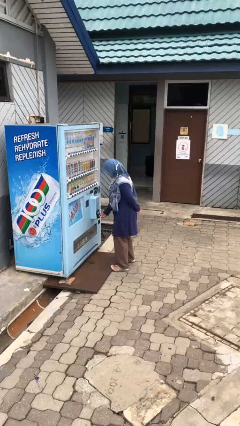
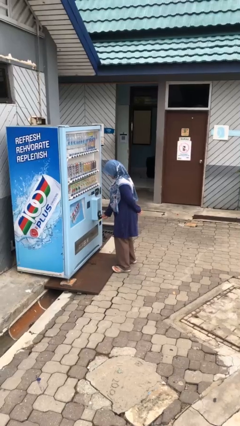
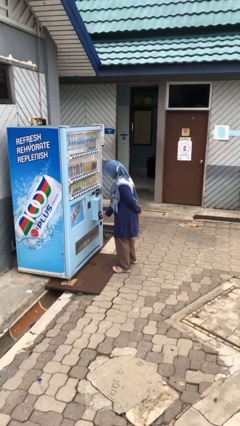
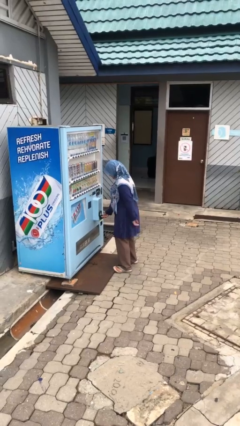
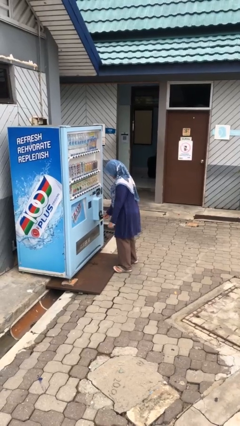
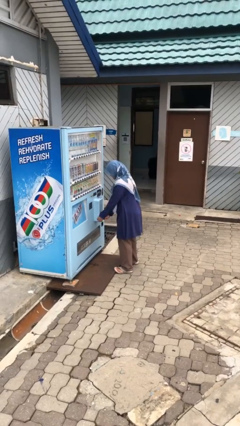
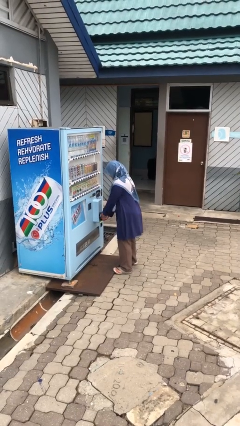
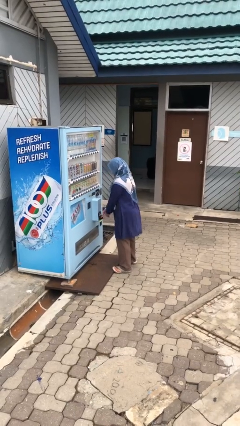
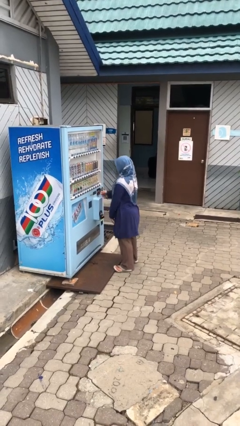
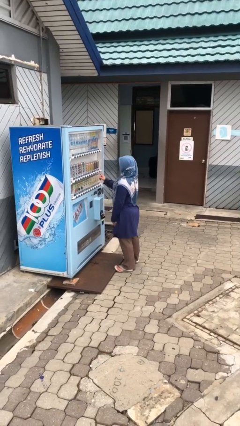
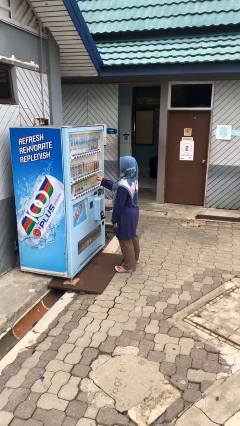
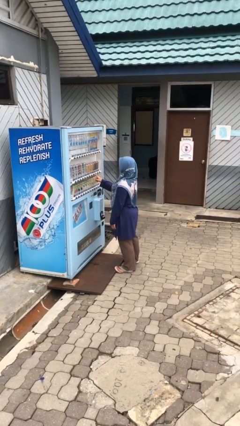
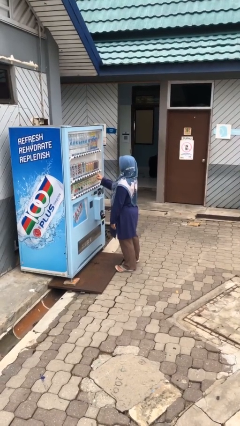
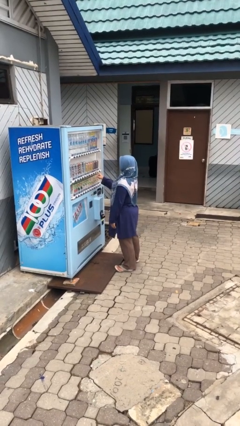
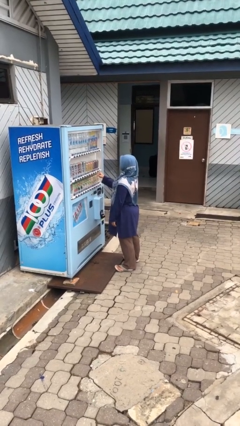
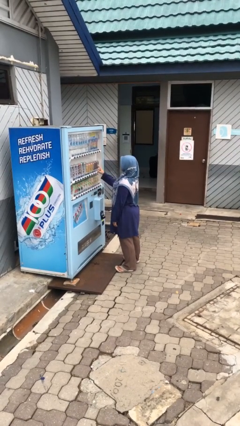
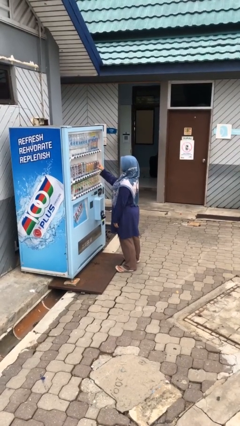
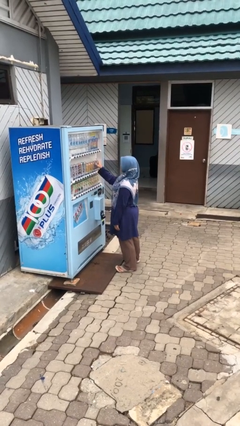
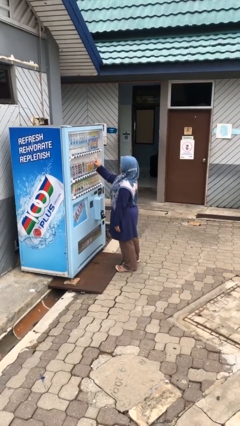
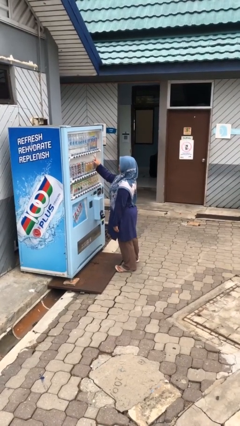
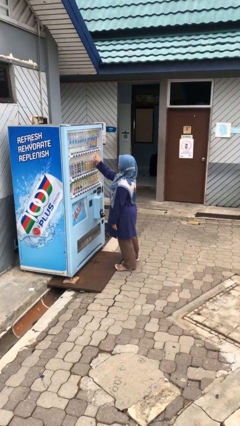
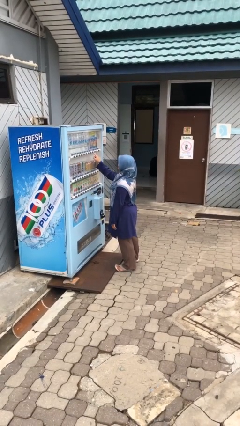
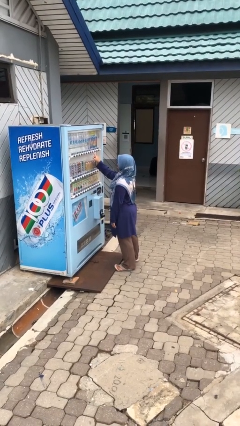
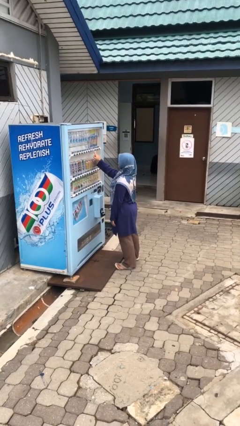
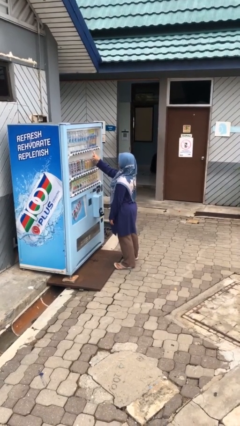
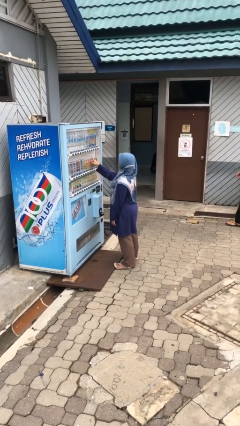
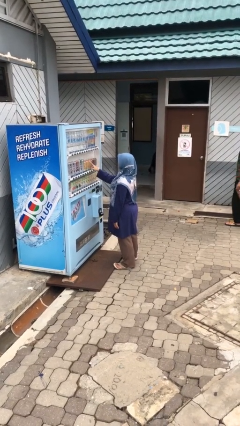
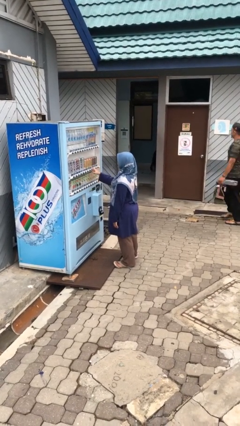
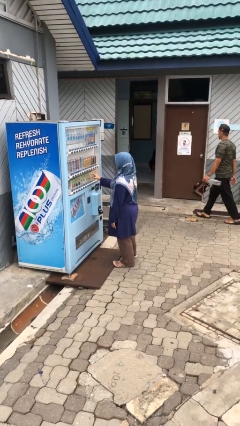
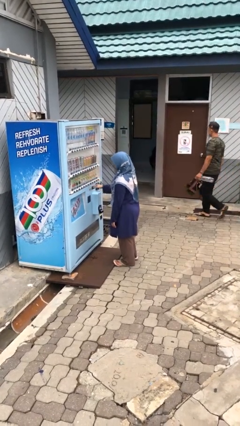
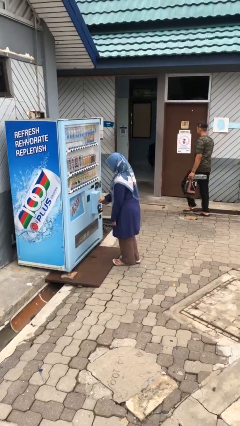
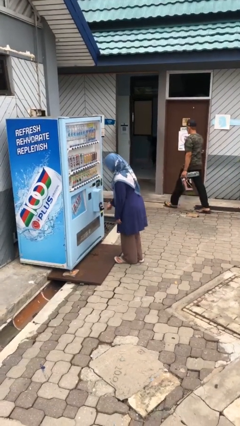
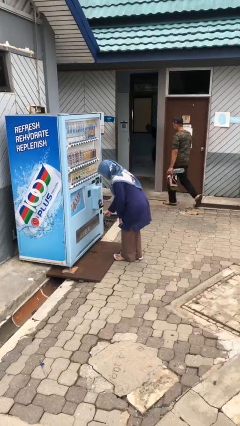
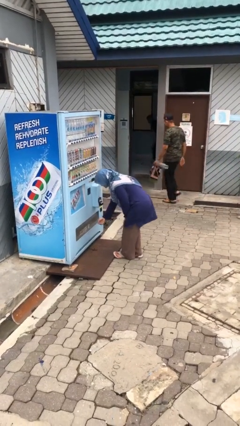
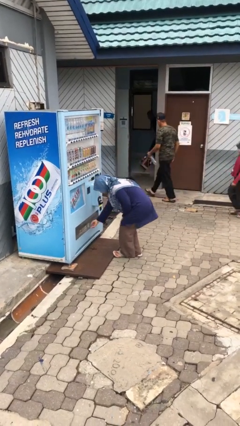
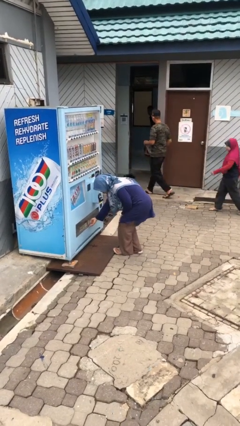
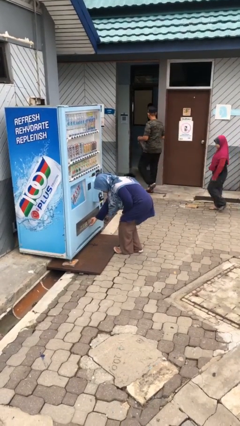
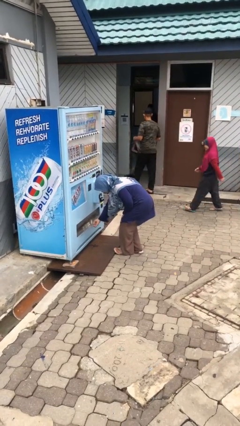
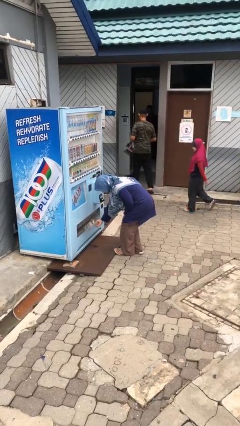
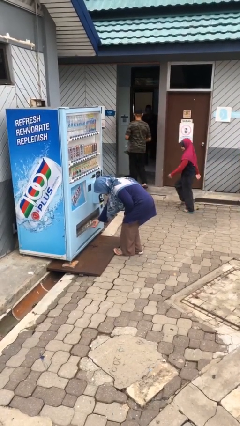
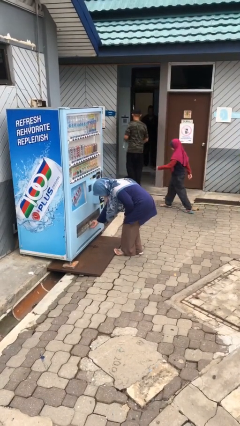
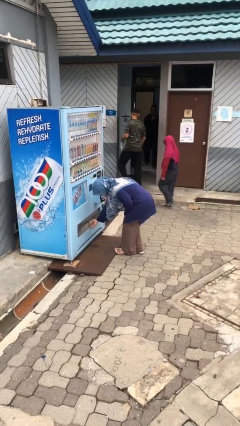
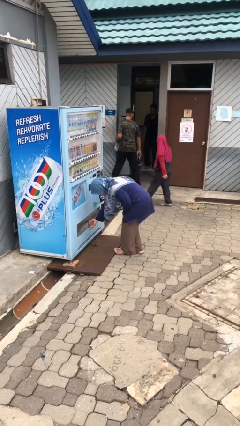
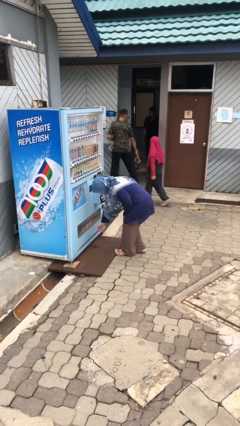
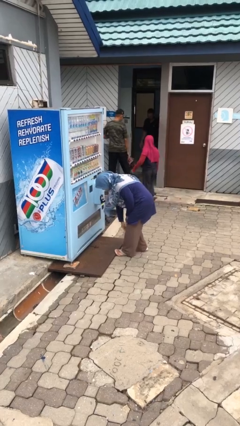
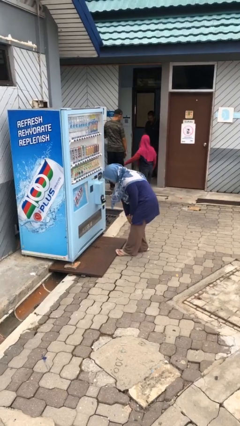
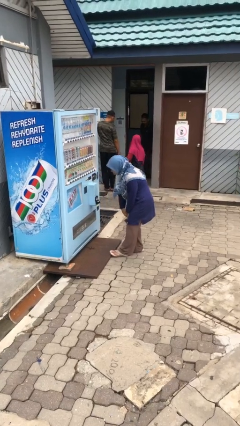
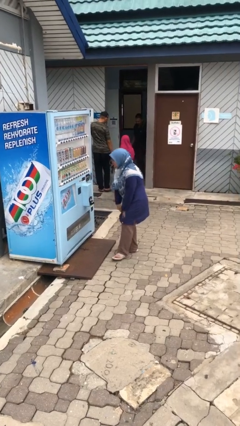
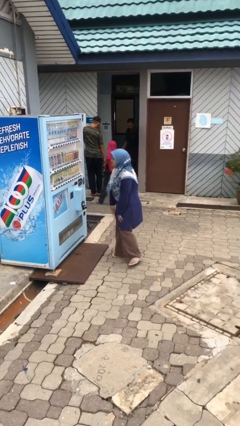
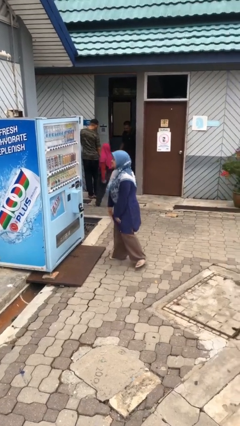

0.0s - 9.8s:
person purchases from machine

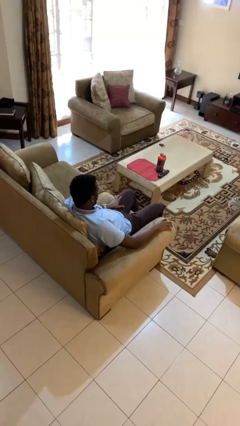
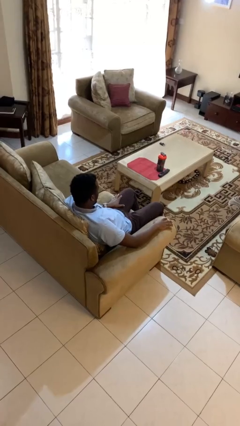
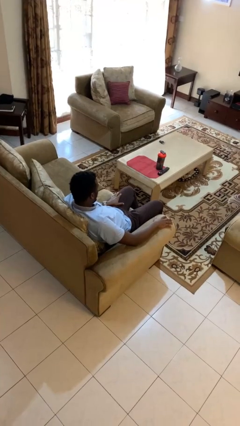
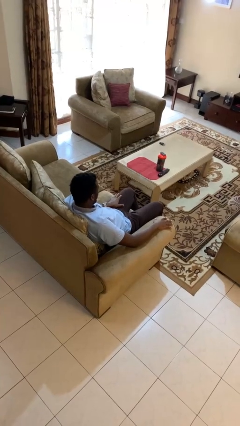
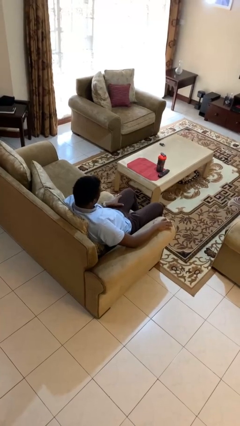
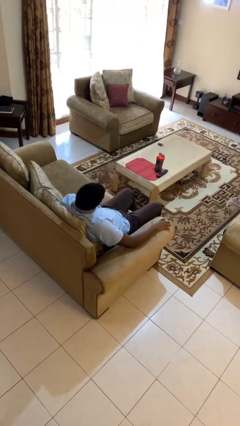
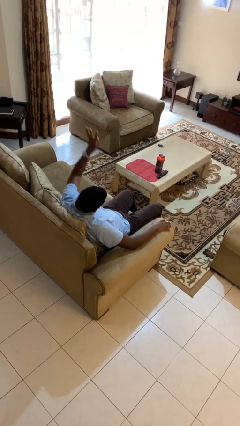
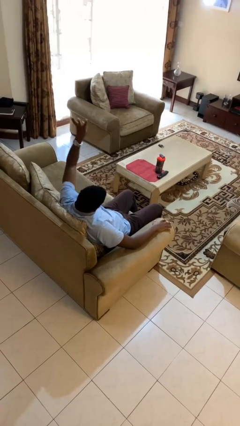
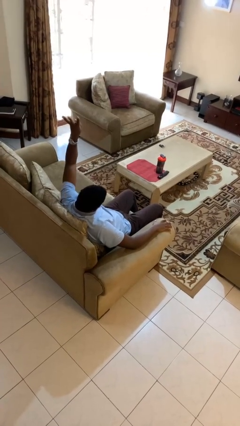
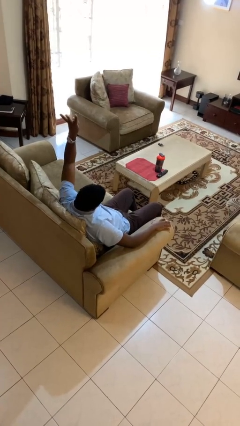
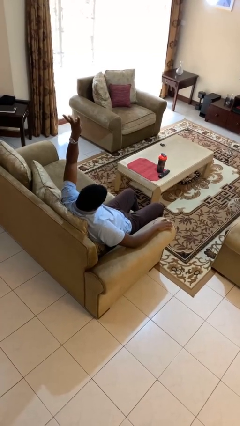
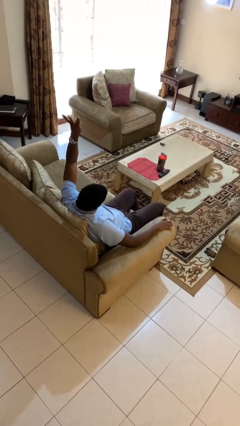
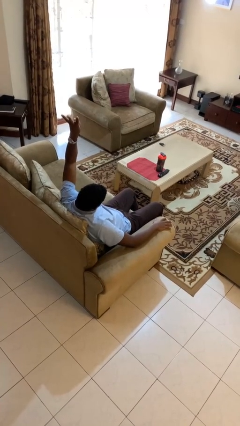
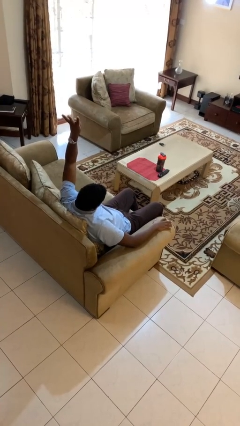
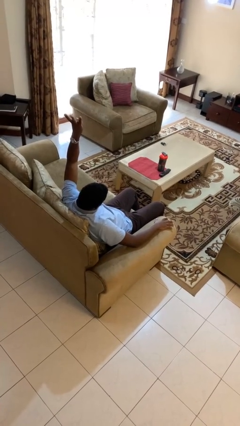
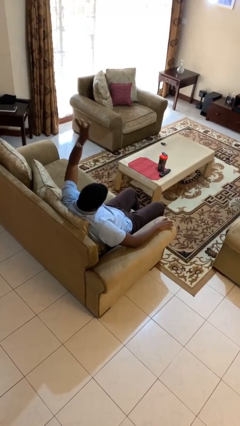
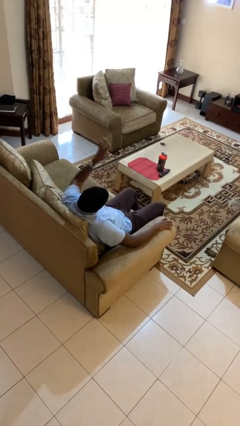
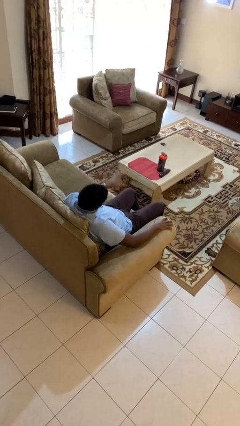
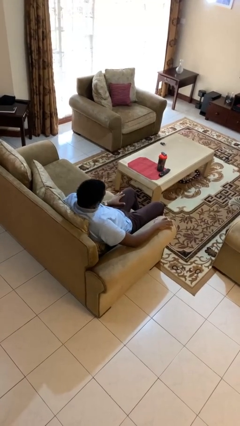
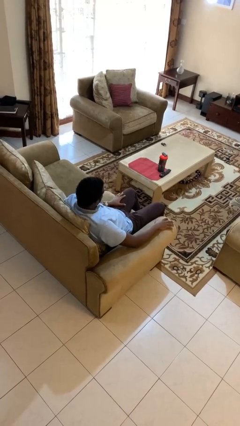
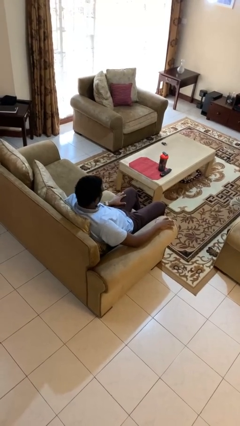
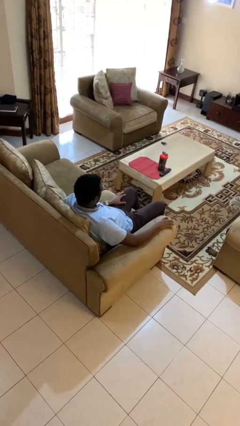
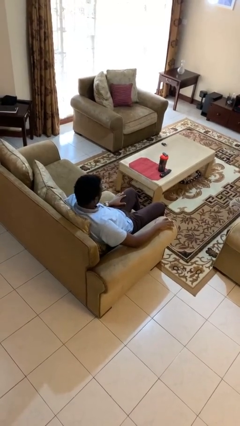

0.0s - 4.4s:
person gestures number four

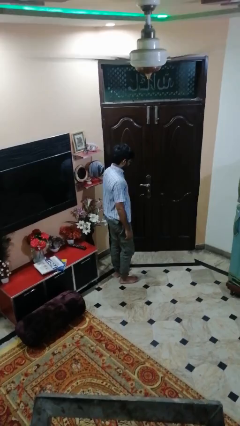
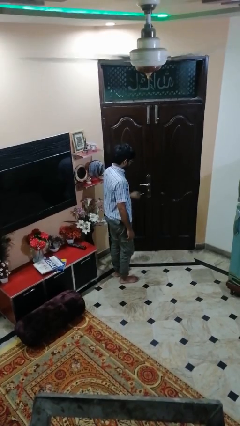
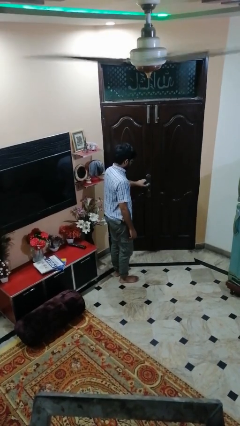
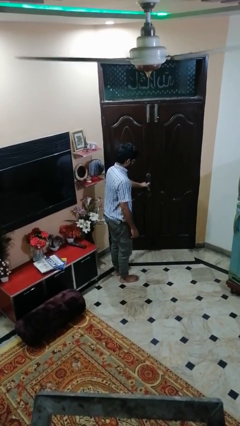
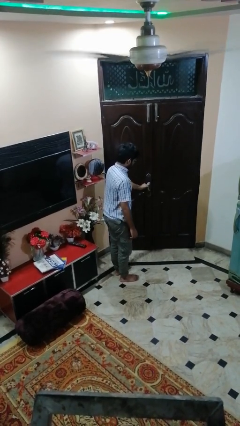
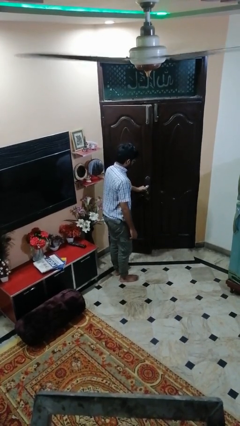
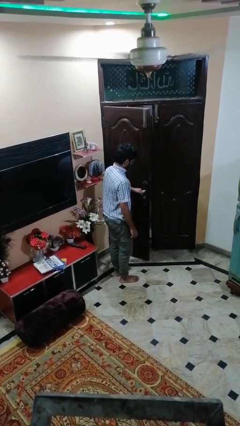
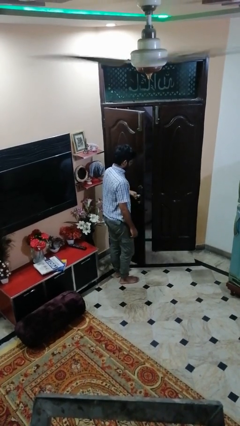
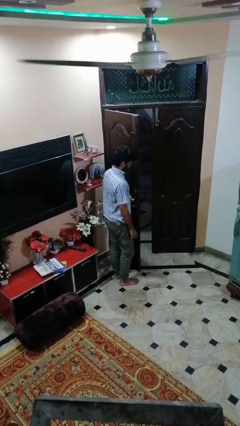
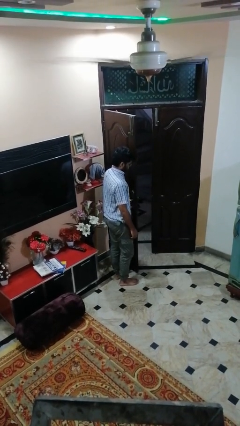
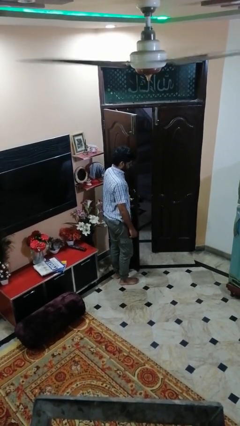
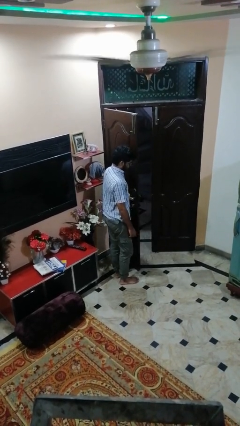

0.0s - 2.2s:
person opens facility door

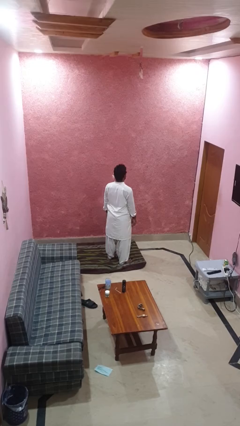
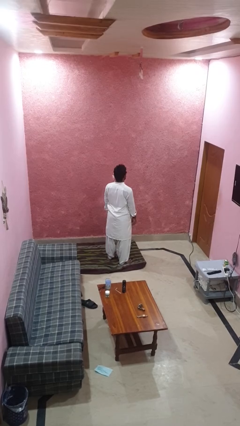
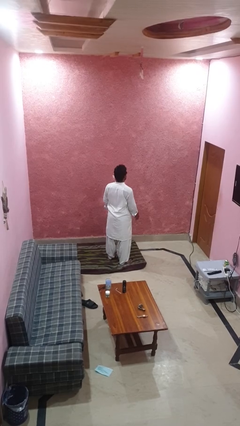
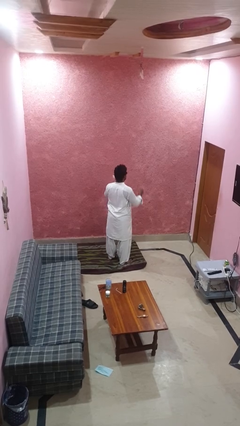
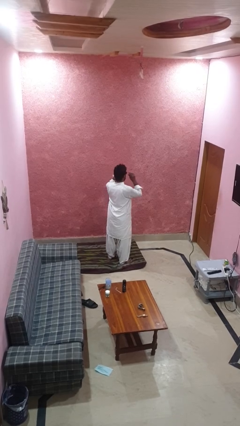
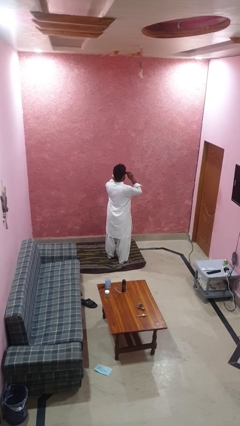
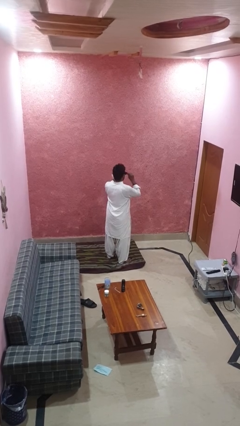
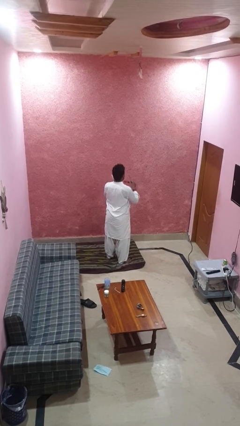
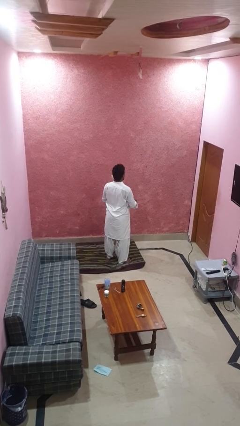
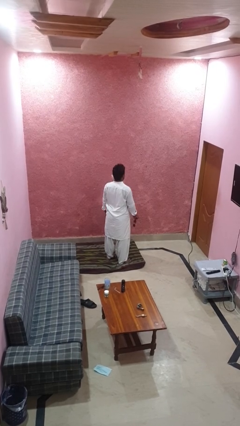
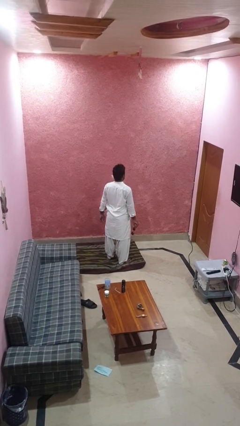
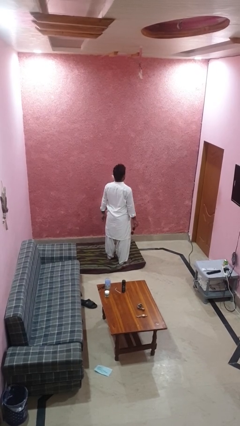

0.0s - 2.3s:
person takes off sunglasses
